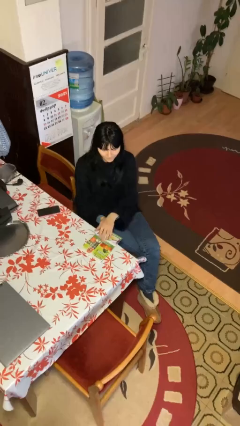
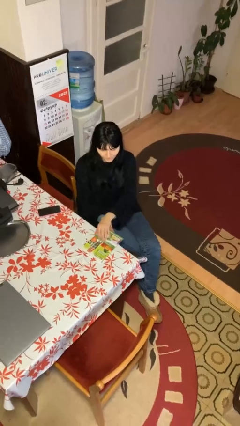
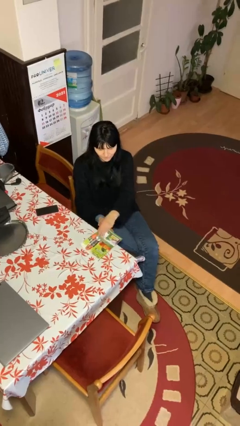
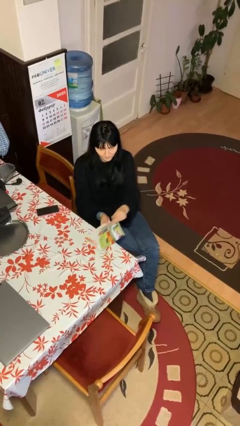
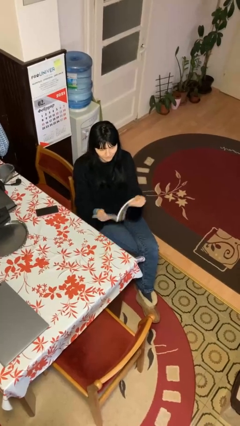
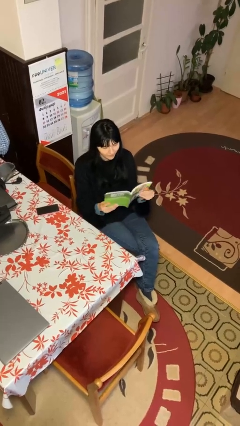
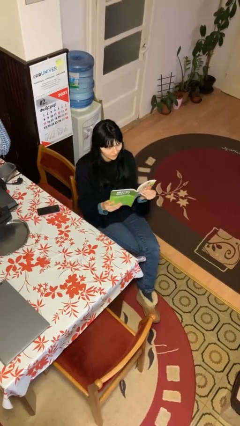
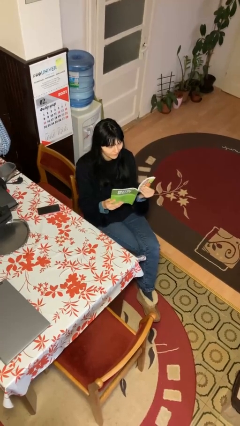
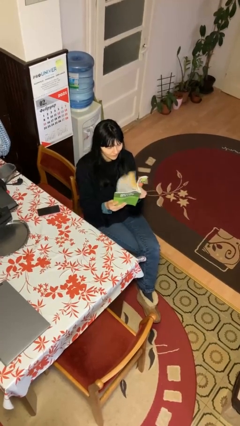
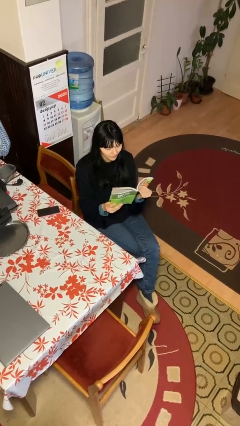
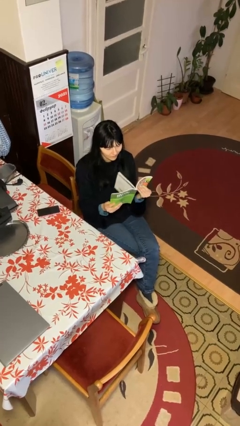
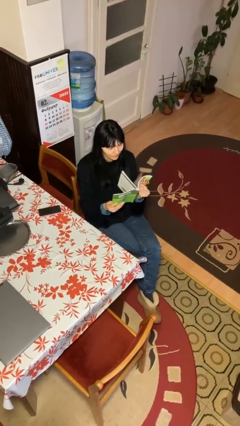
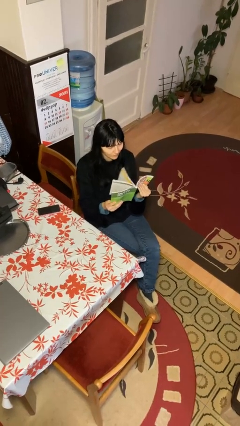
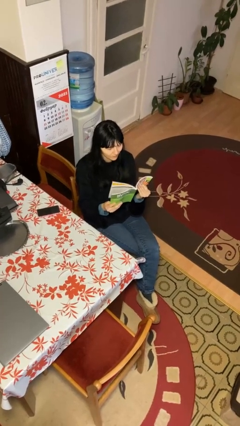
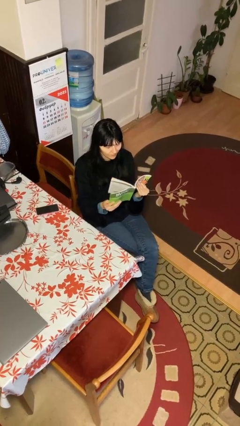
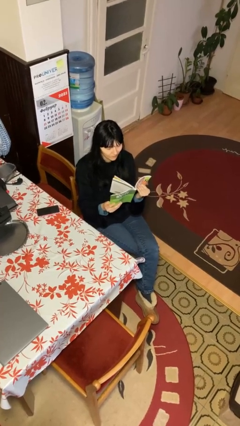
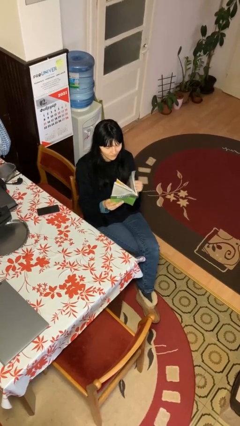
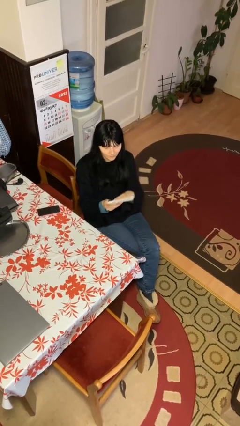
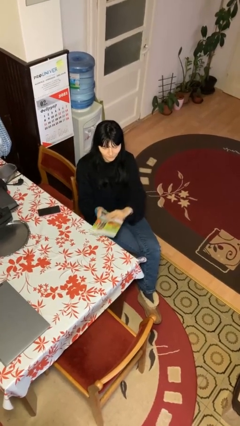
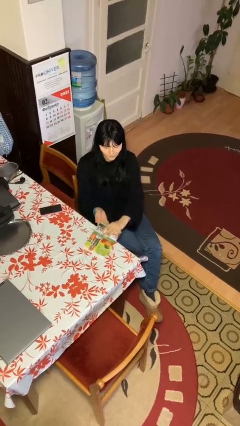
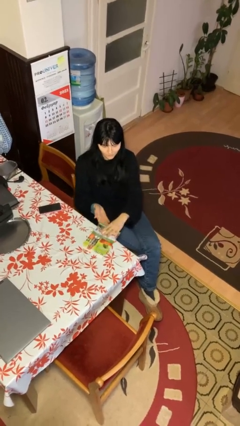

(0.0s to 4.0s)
person reads document

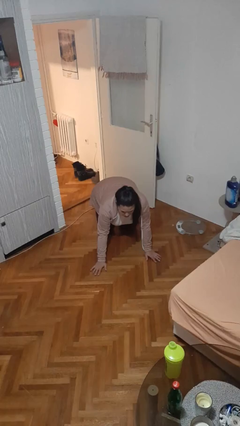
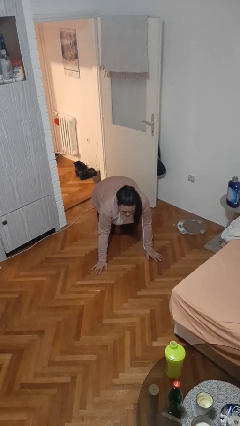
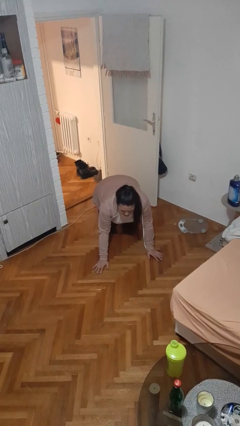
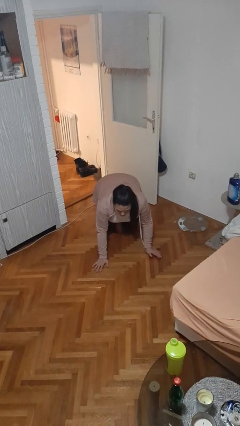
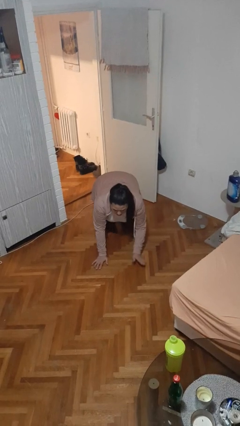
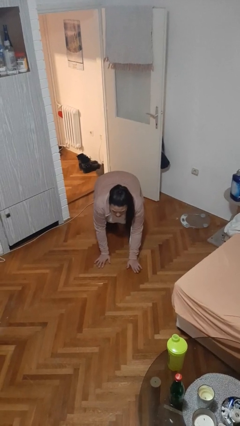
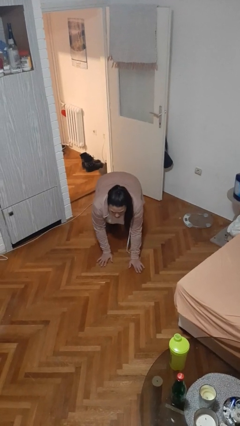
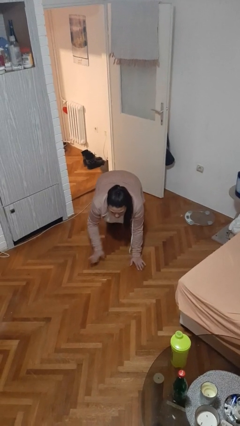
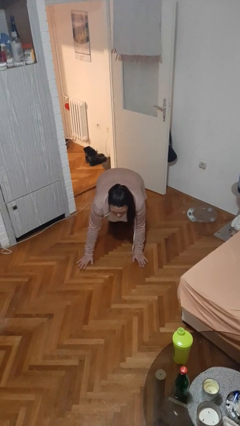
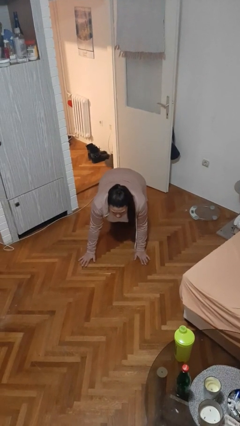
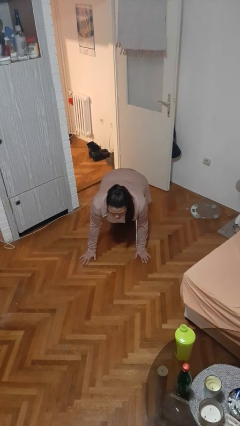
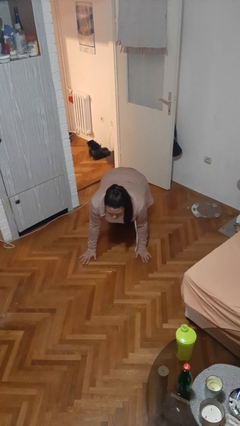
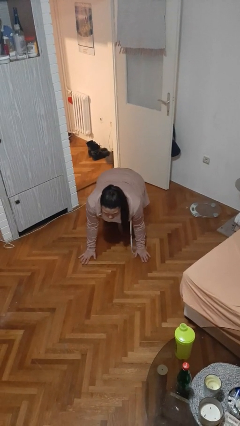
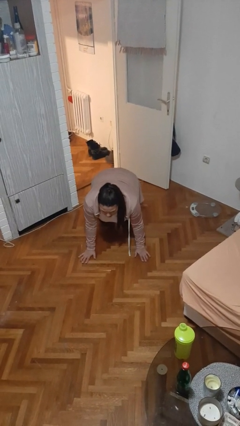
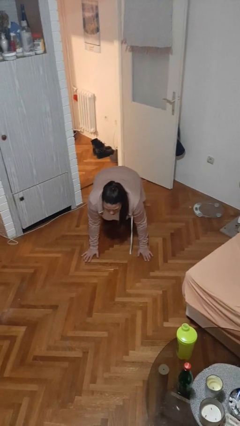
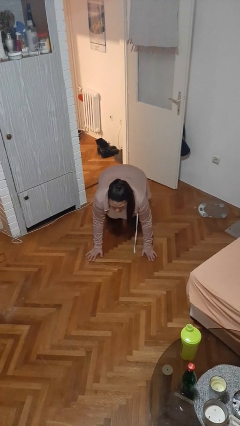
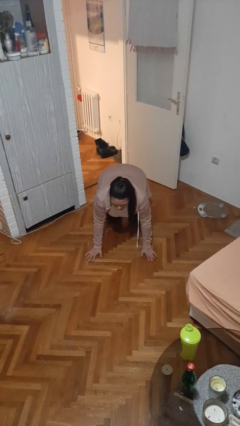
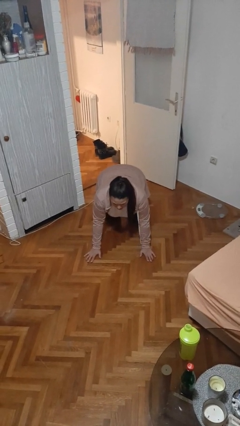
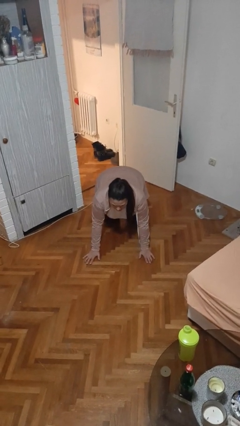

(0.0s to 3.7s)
person crawls

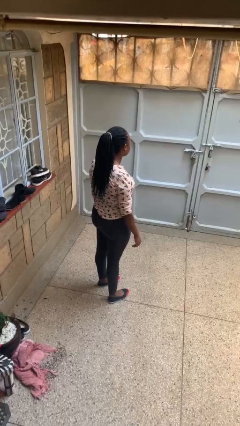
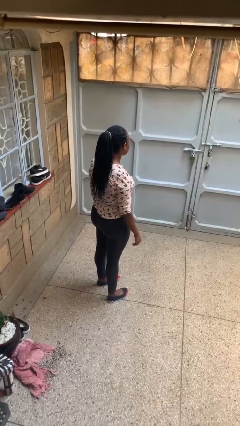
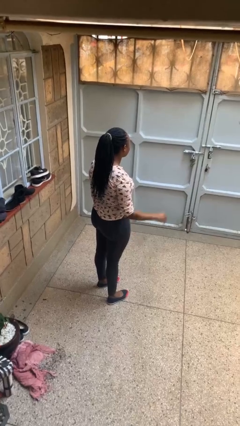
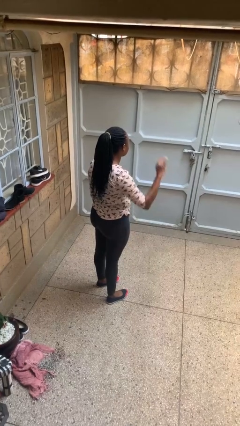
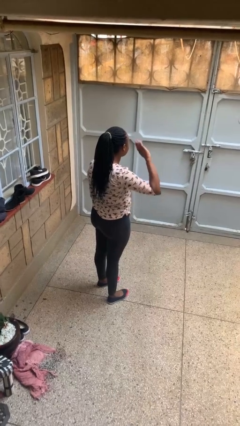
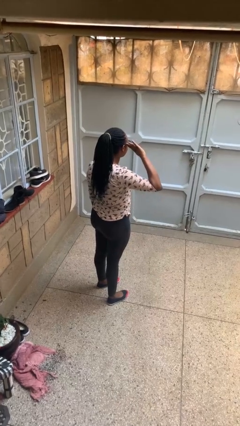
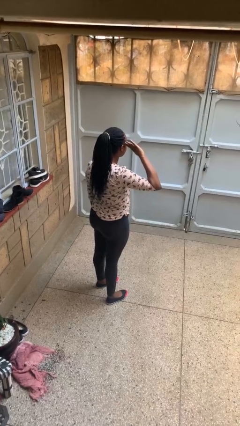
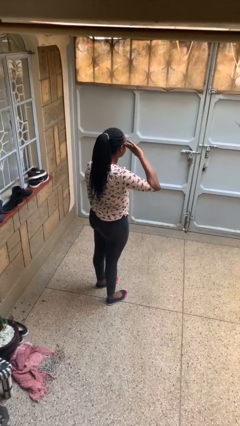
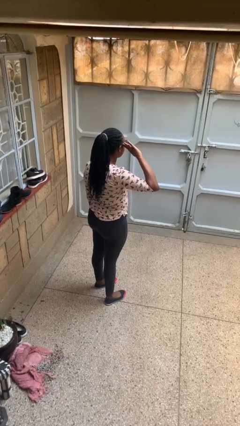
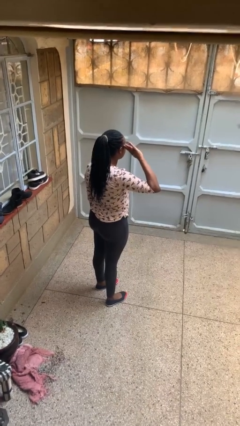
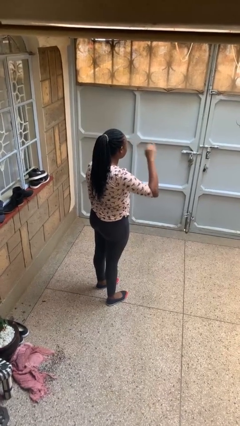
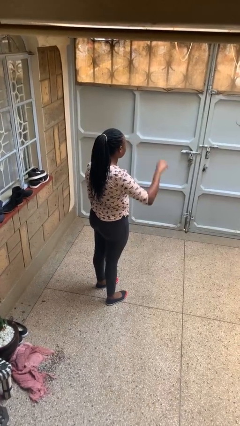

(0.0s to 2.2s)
person salutes

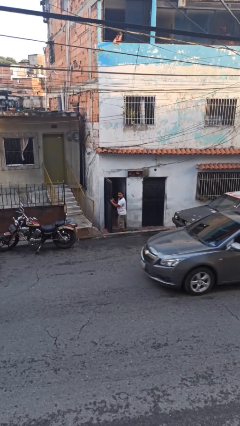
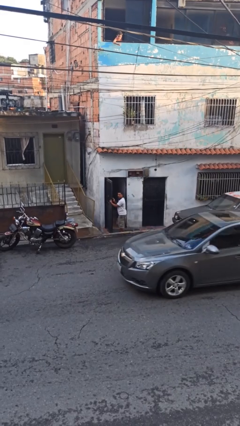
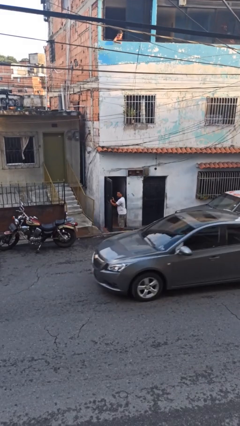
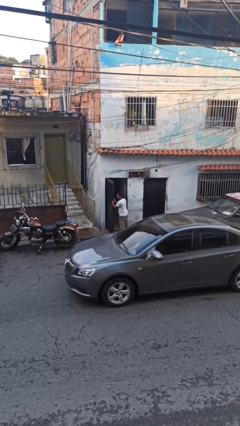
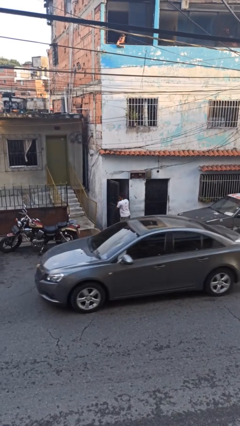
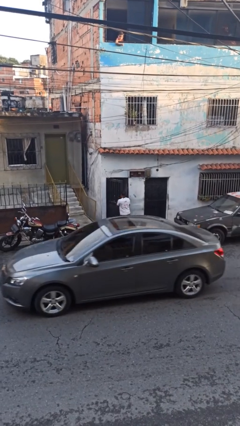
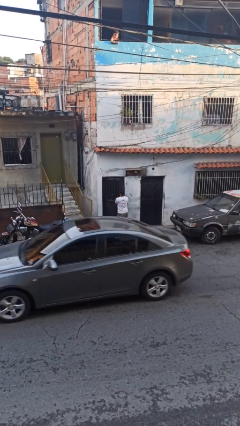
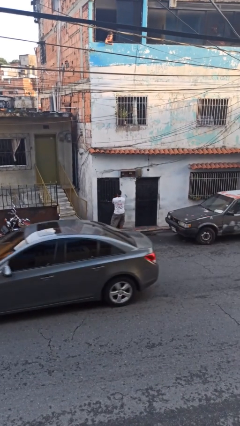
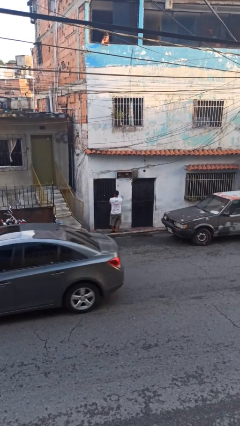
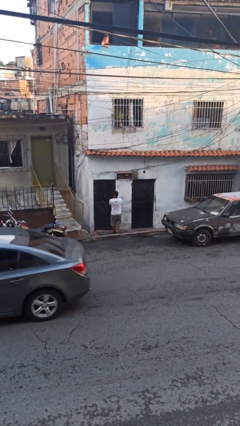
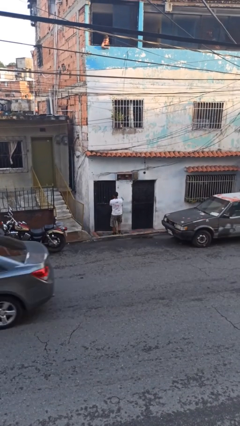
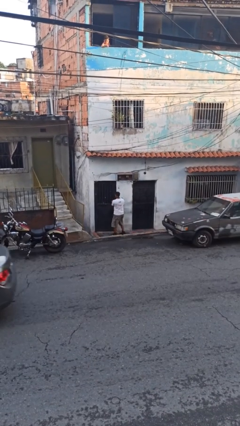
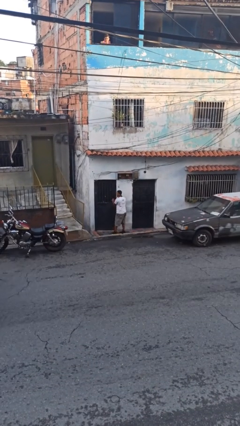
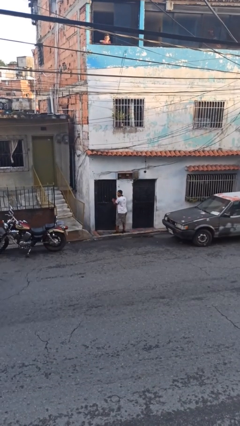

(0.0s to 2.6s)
person closes facility door

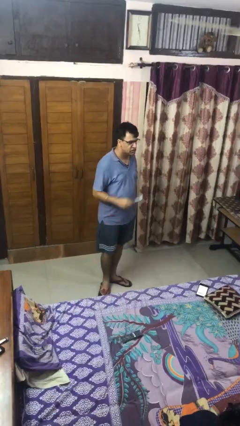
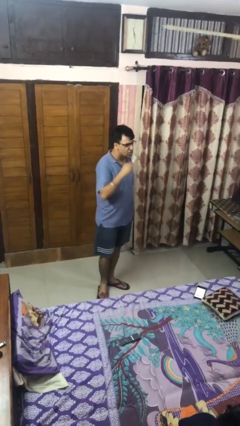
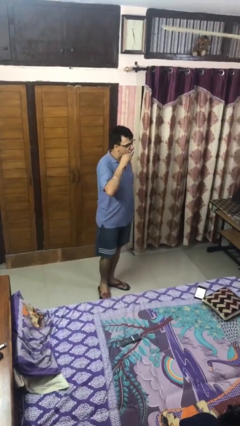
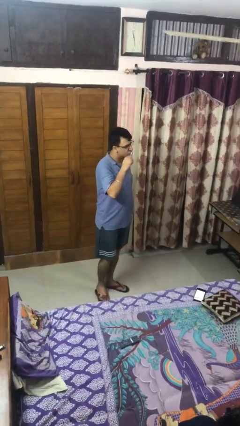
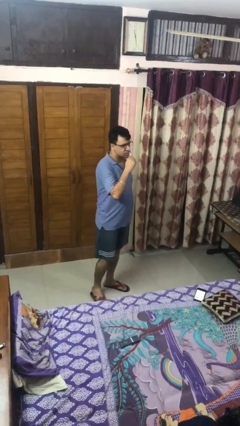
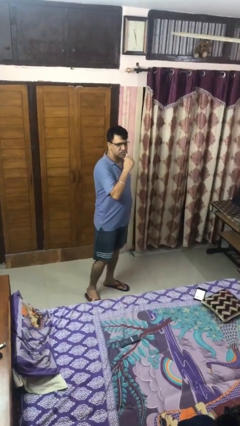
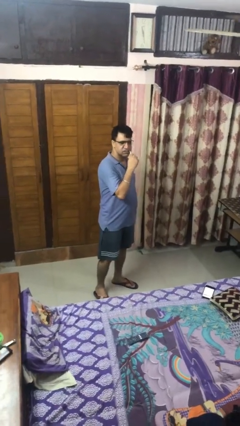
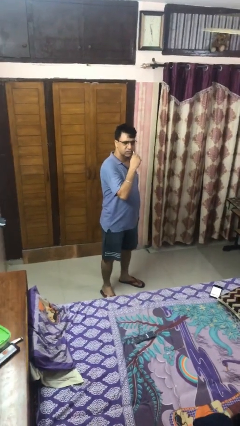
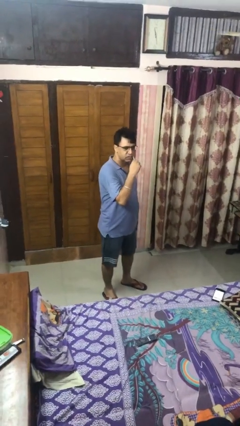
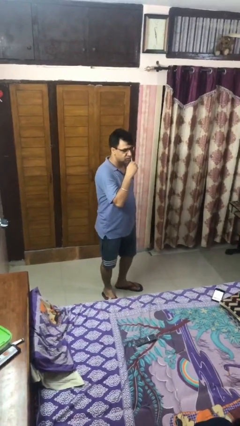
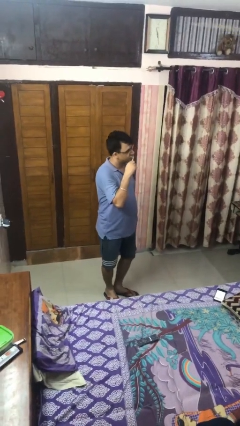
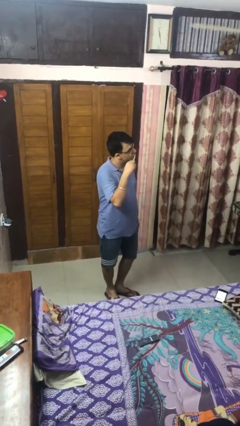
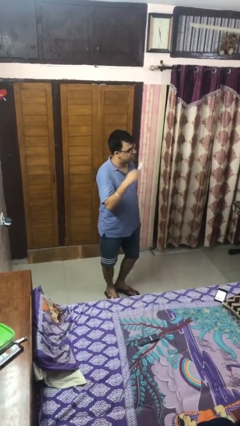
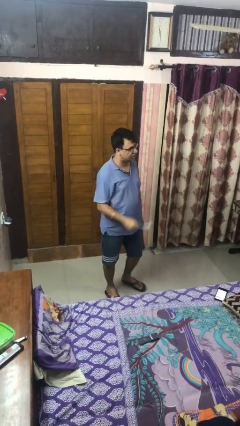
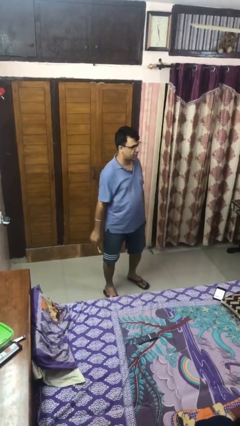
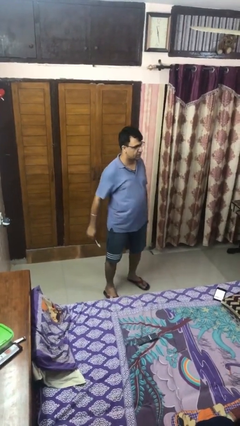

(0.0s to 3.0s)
person brushes teeth

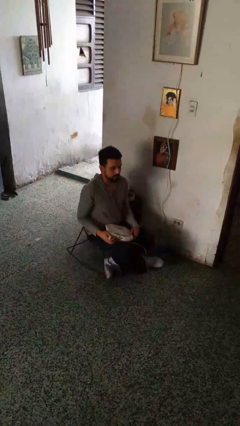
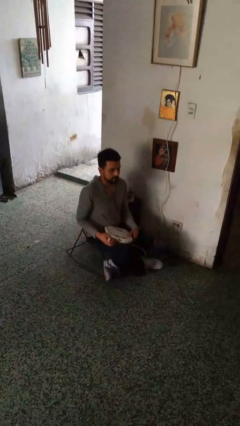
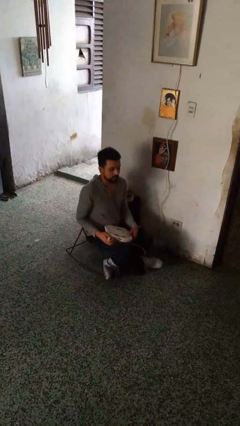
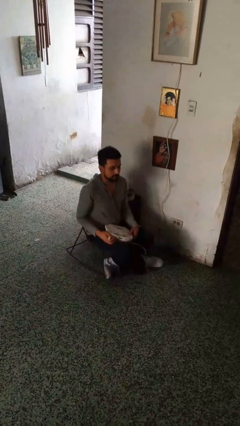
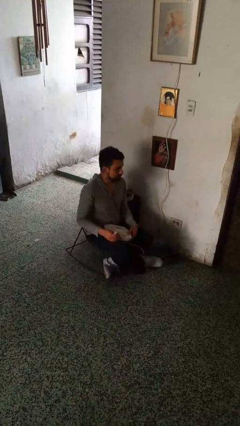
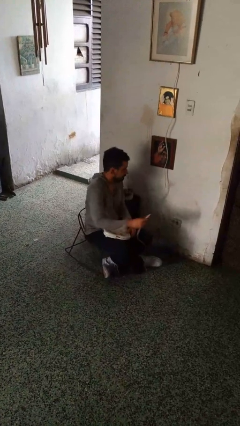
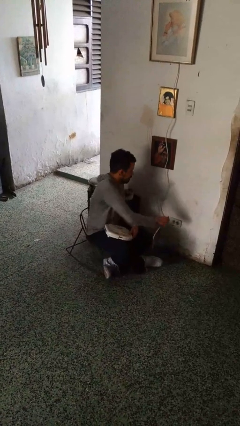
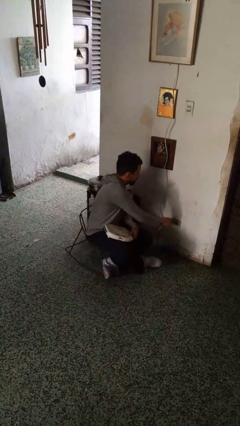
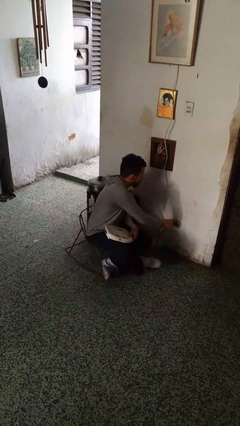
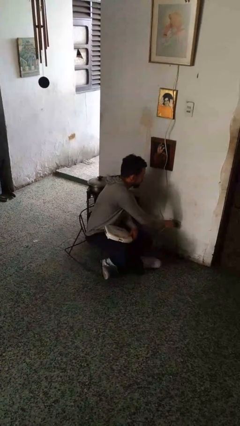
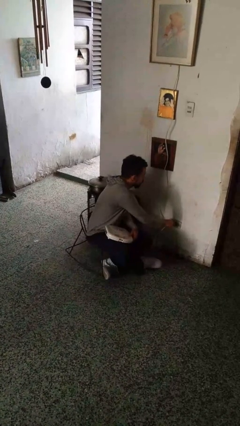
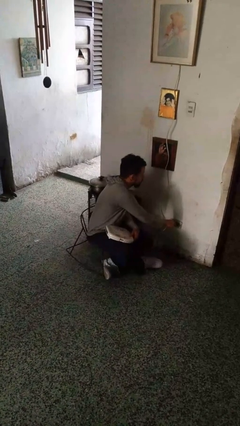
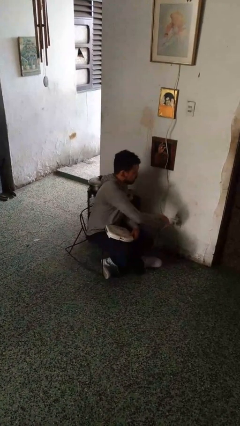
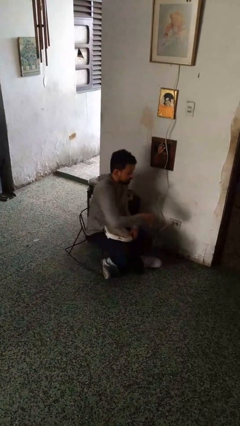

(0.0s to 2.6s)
person plugs into electrical socket
